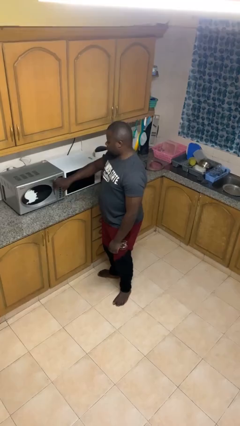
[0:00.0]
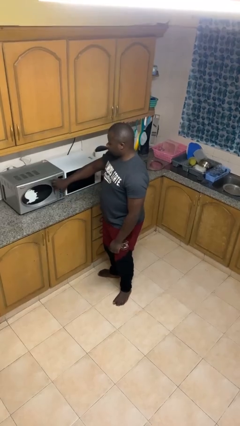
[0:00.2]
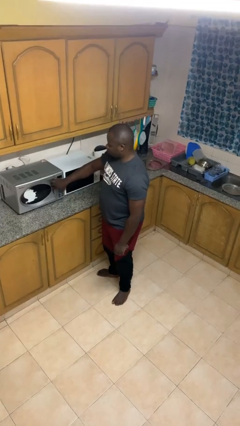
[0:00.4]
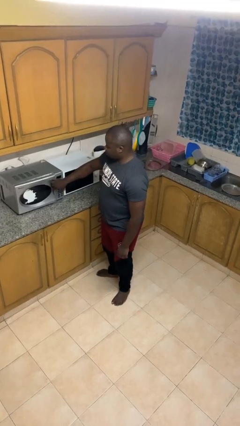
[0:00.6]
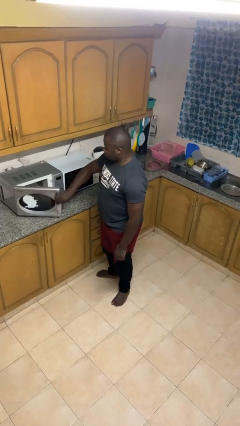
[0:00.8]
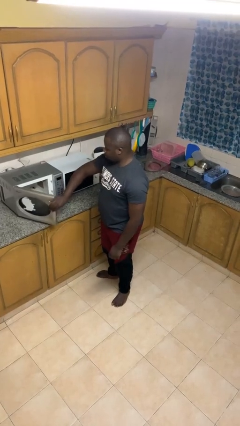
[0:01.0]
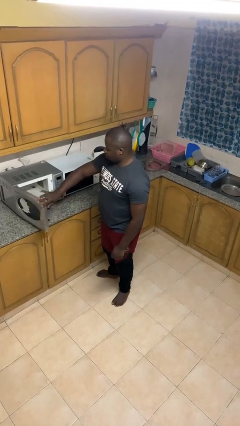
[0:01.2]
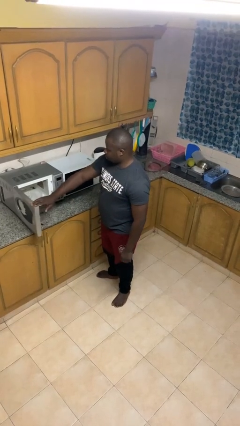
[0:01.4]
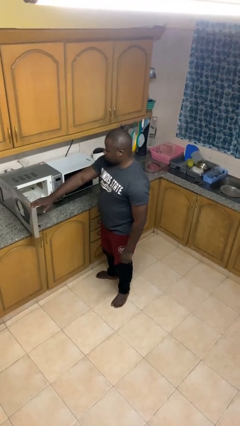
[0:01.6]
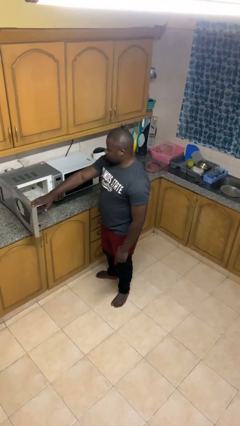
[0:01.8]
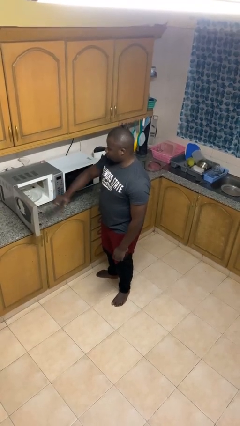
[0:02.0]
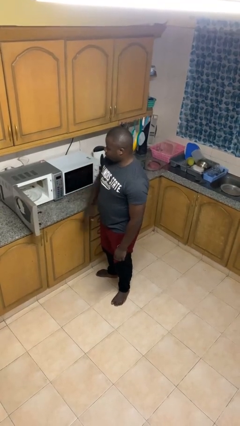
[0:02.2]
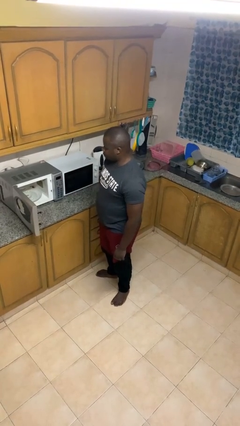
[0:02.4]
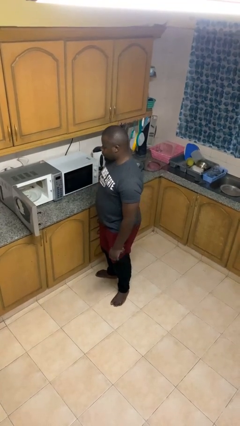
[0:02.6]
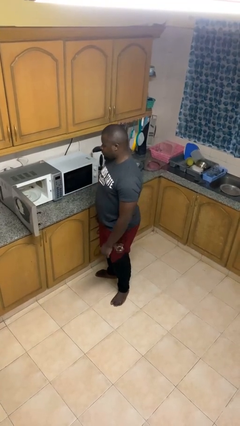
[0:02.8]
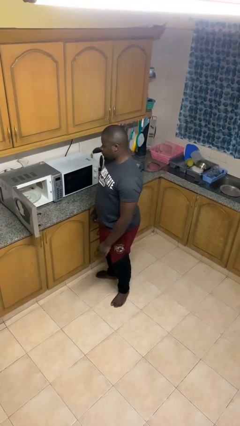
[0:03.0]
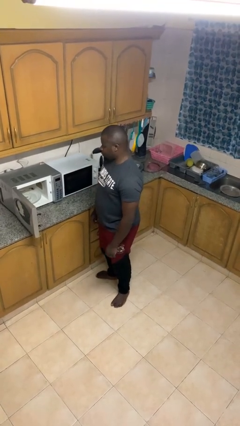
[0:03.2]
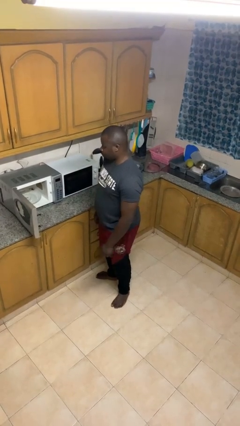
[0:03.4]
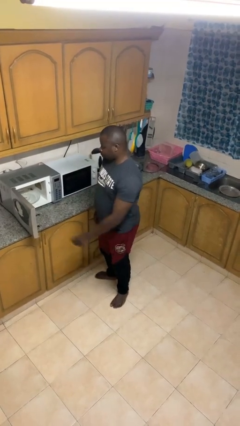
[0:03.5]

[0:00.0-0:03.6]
person opens microwave

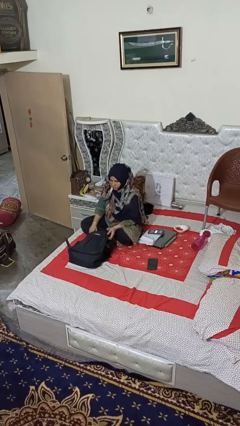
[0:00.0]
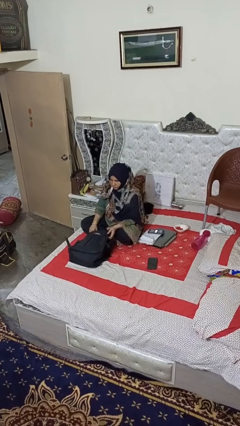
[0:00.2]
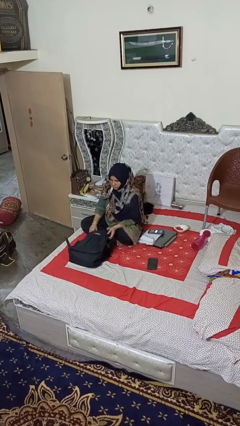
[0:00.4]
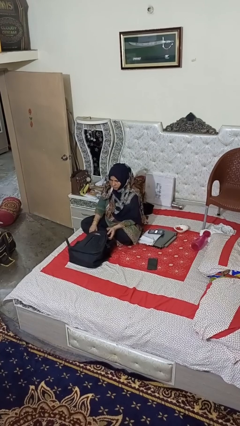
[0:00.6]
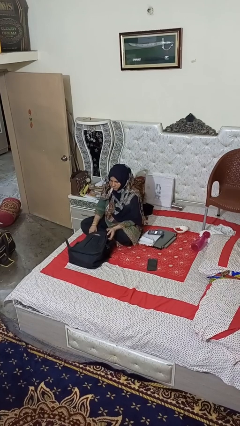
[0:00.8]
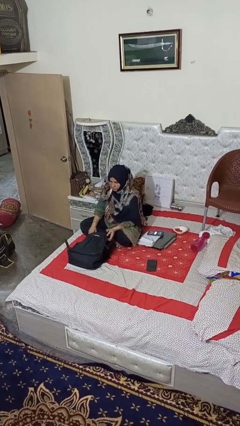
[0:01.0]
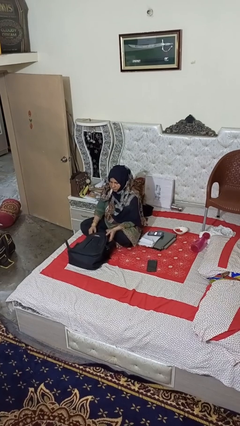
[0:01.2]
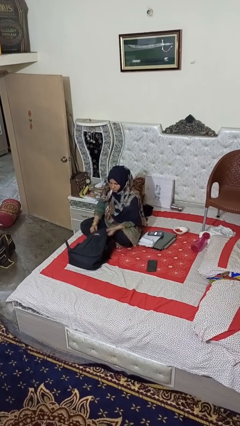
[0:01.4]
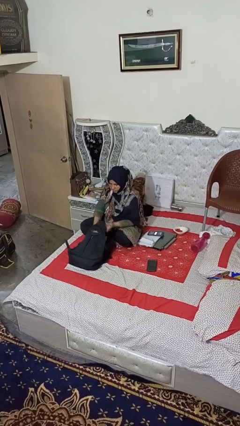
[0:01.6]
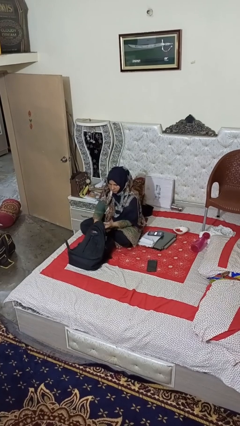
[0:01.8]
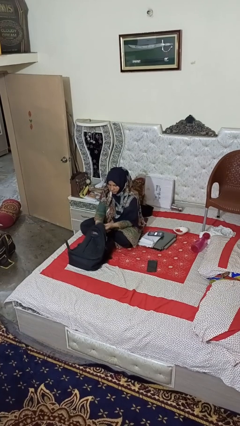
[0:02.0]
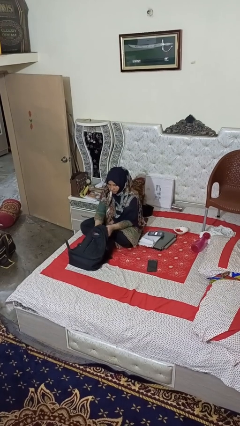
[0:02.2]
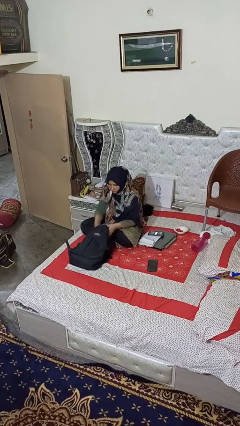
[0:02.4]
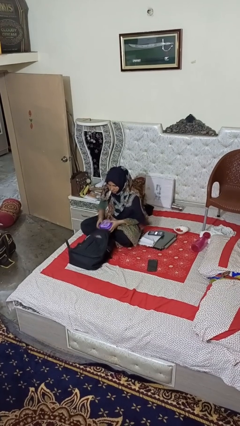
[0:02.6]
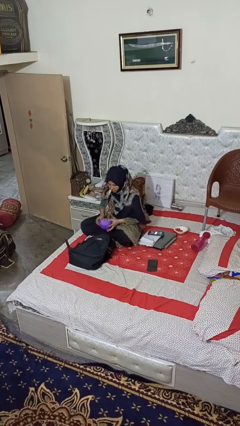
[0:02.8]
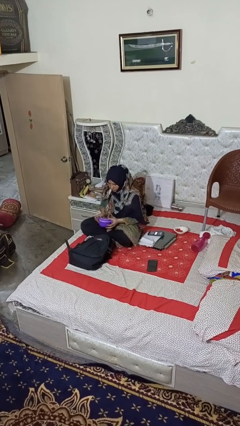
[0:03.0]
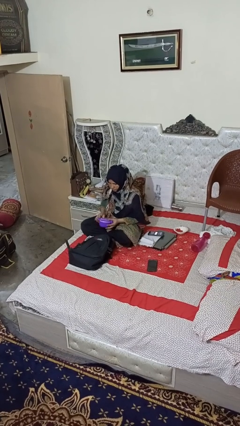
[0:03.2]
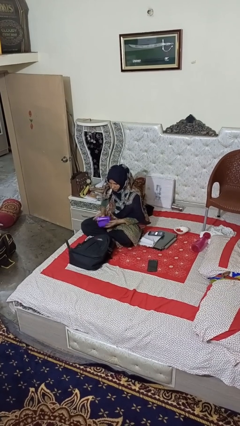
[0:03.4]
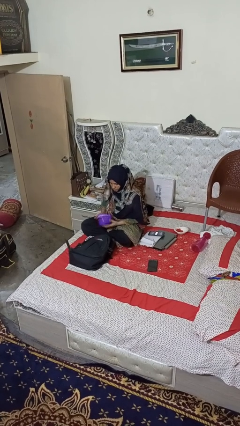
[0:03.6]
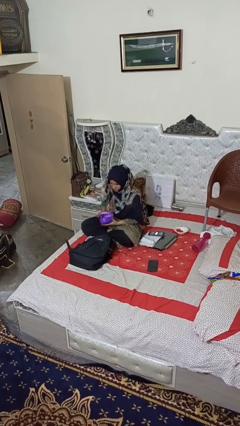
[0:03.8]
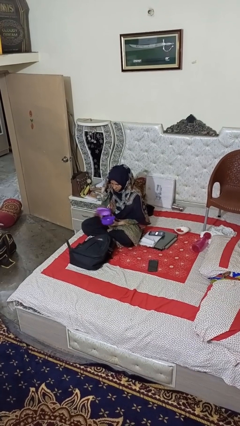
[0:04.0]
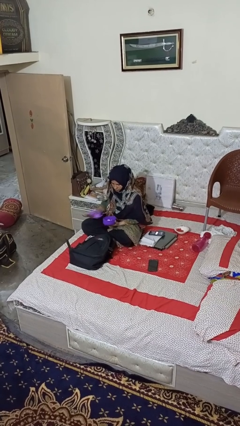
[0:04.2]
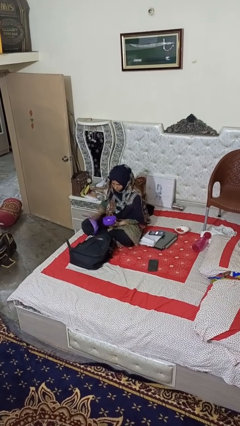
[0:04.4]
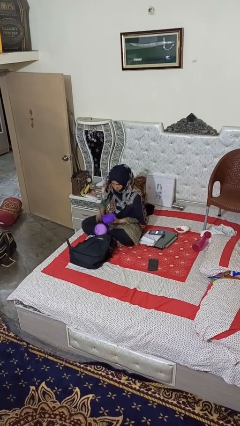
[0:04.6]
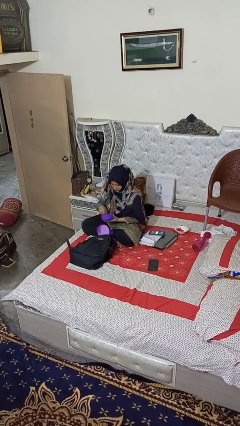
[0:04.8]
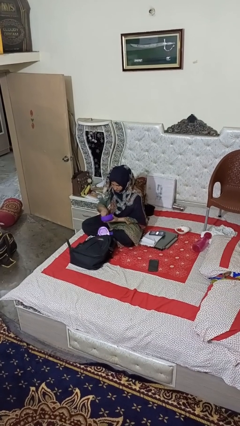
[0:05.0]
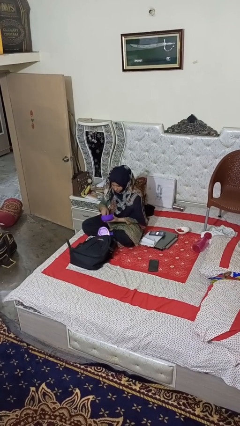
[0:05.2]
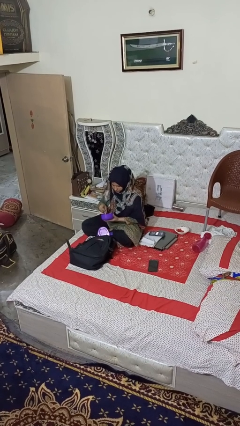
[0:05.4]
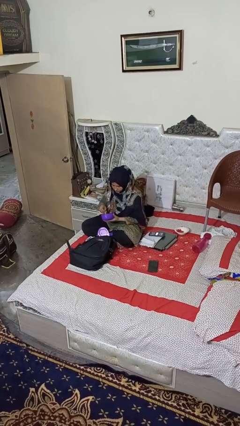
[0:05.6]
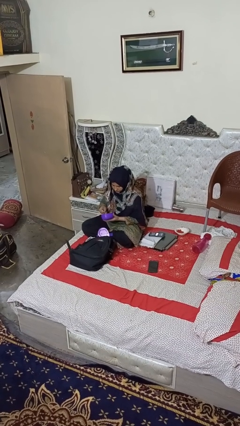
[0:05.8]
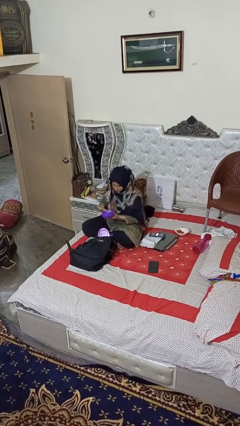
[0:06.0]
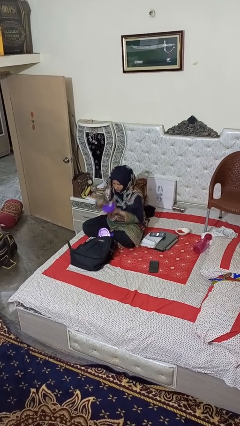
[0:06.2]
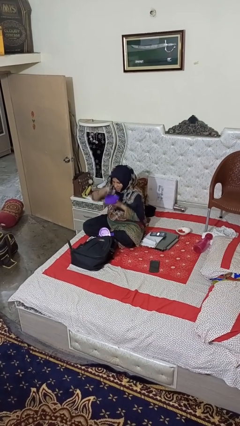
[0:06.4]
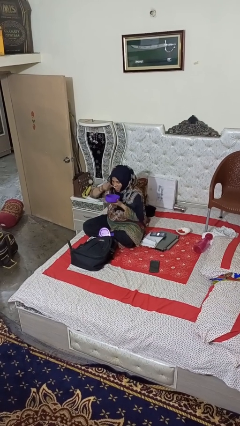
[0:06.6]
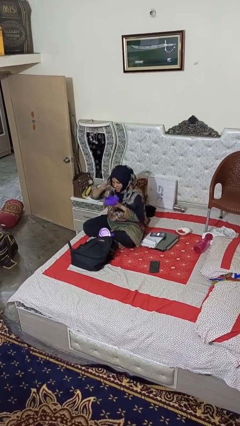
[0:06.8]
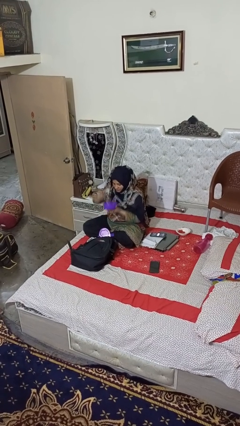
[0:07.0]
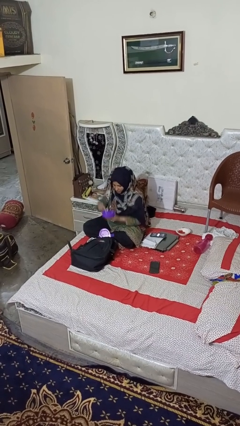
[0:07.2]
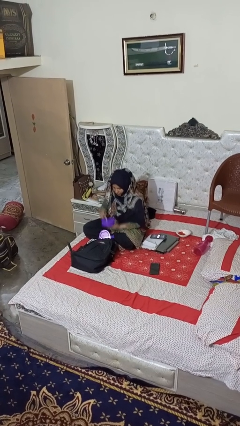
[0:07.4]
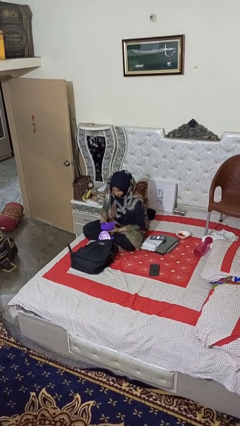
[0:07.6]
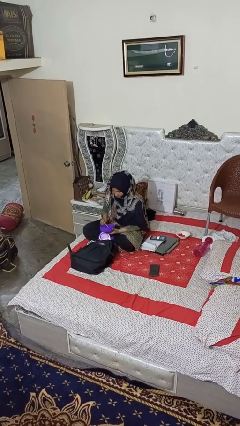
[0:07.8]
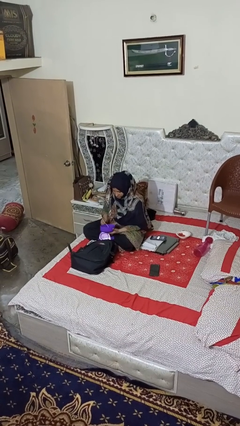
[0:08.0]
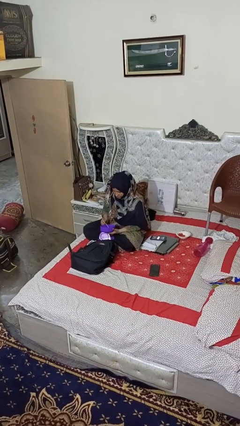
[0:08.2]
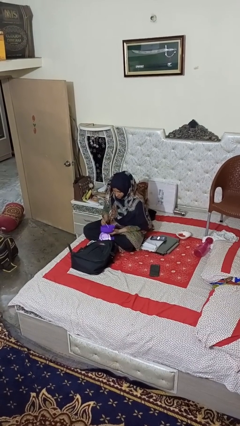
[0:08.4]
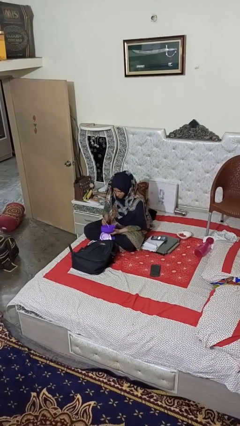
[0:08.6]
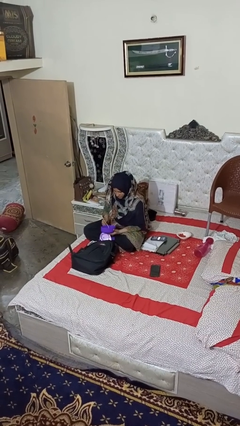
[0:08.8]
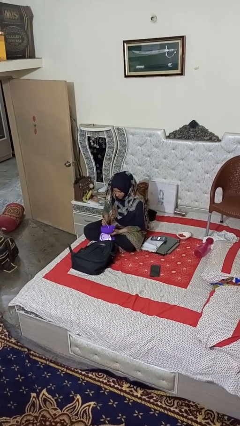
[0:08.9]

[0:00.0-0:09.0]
person eats snack from bag

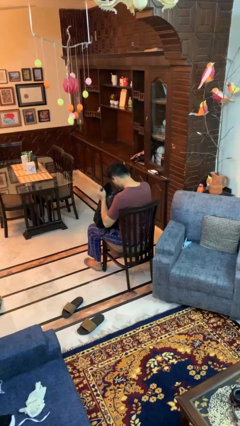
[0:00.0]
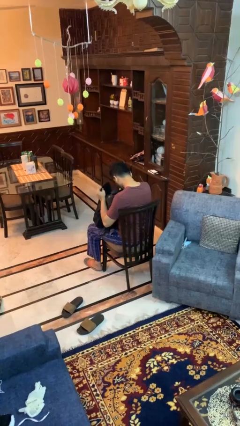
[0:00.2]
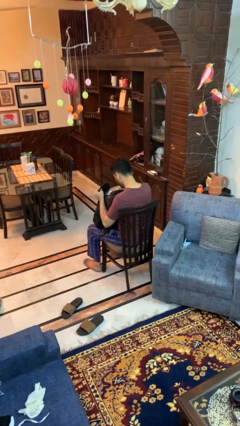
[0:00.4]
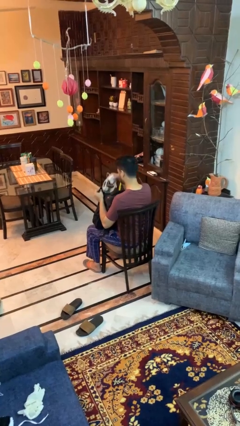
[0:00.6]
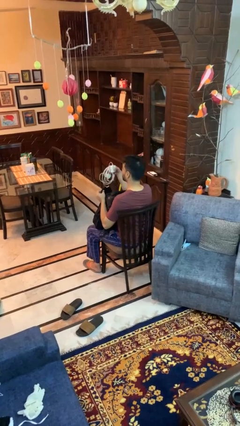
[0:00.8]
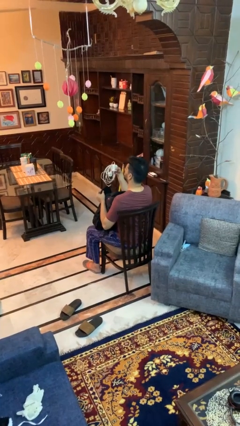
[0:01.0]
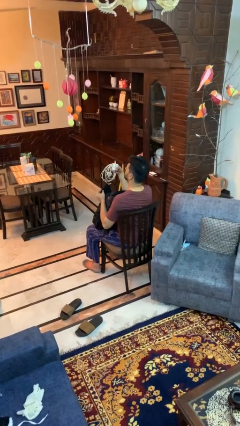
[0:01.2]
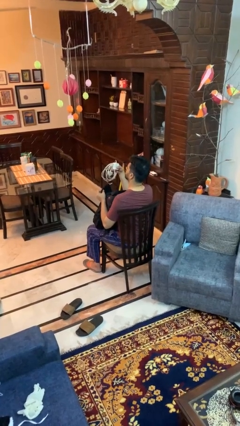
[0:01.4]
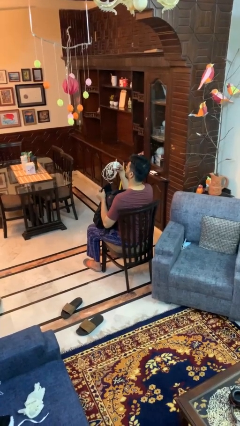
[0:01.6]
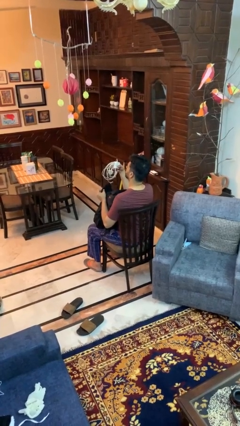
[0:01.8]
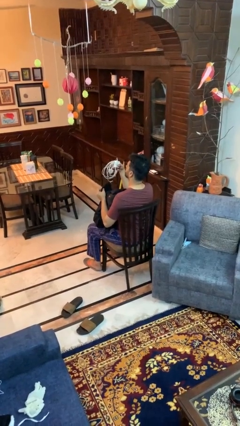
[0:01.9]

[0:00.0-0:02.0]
person takes object from backpack

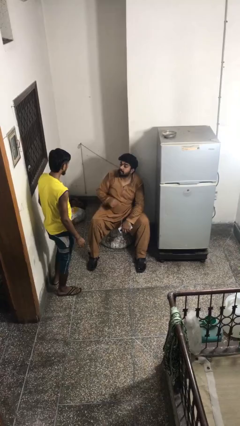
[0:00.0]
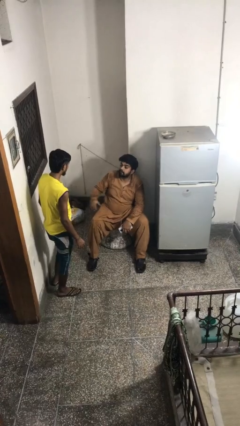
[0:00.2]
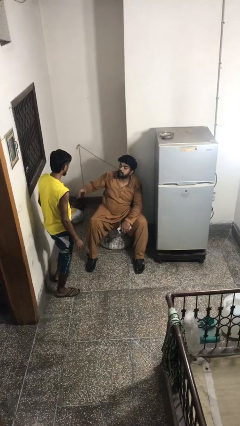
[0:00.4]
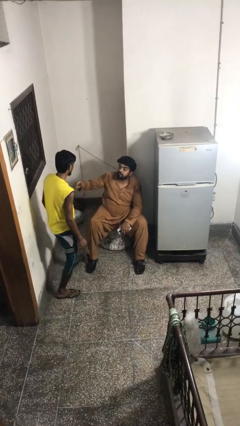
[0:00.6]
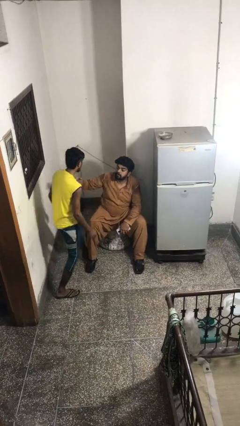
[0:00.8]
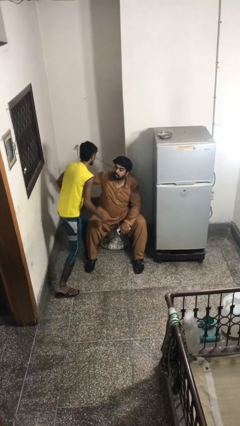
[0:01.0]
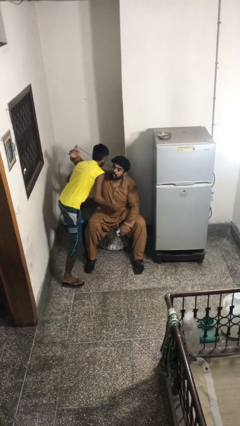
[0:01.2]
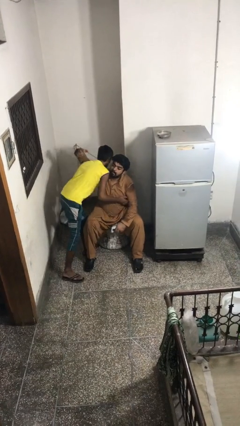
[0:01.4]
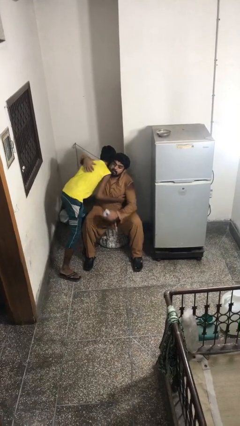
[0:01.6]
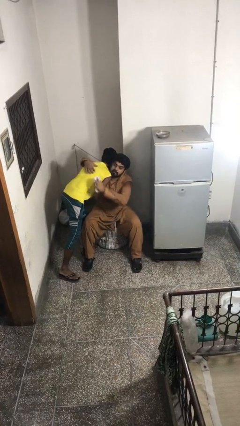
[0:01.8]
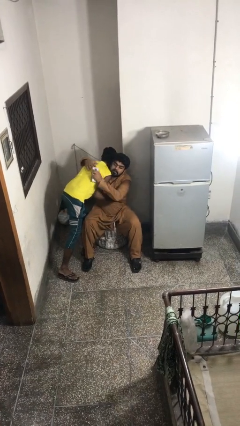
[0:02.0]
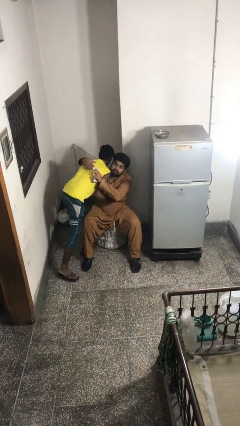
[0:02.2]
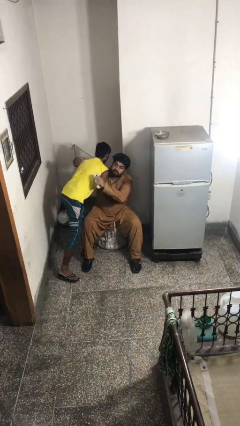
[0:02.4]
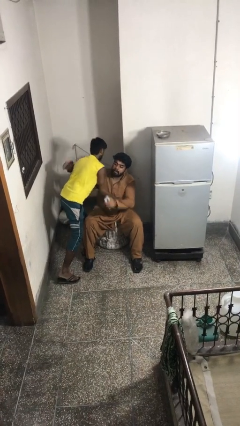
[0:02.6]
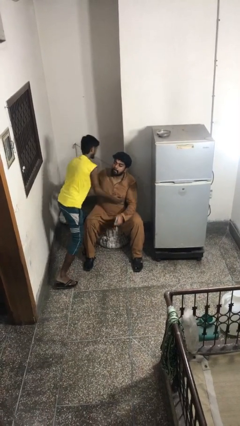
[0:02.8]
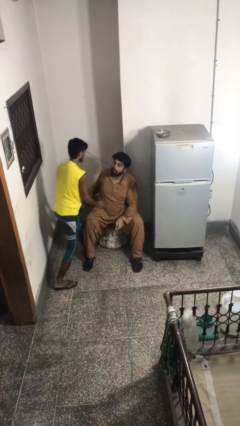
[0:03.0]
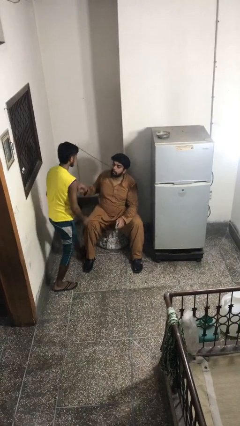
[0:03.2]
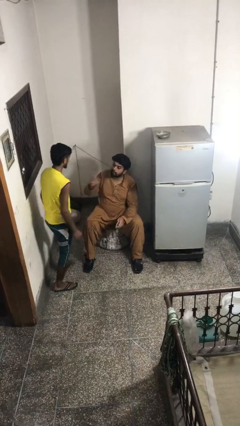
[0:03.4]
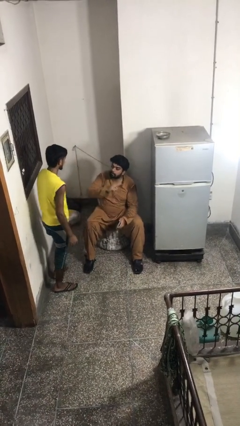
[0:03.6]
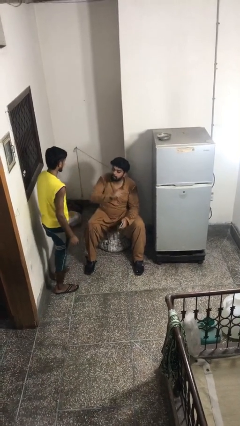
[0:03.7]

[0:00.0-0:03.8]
person embraces person
